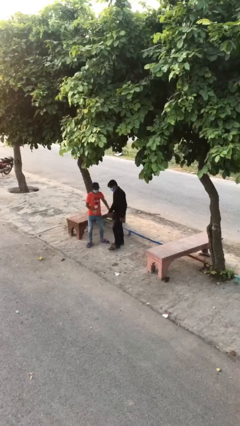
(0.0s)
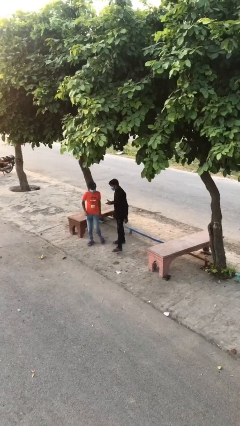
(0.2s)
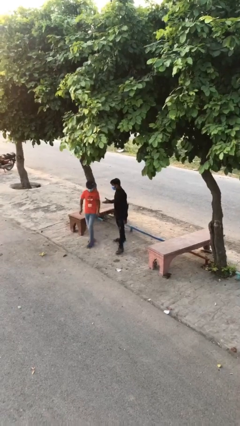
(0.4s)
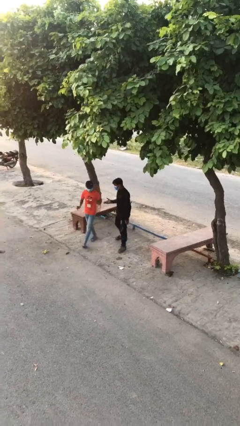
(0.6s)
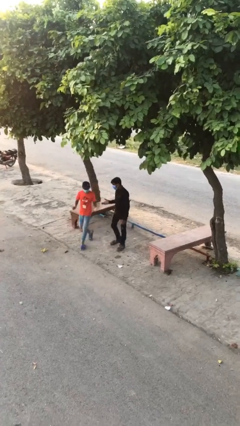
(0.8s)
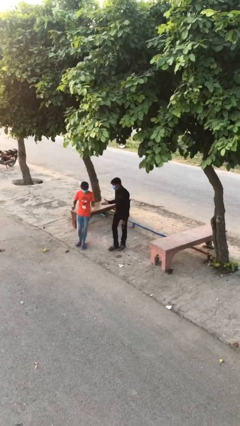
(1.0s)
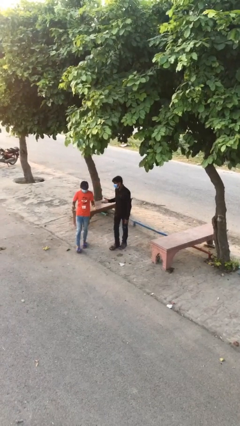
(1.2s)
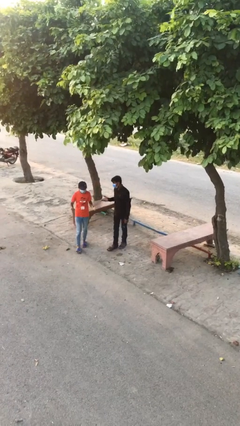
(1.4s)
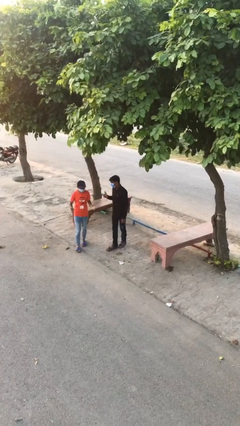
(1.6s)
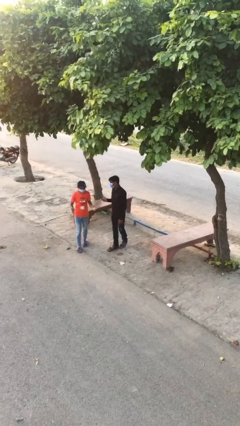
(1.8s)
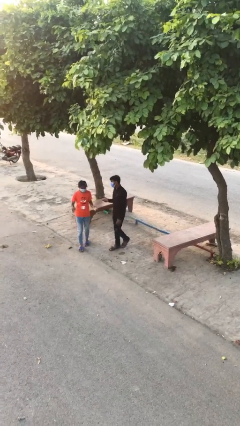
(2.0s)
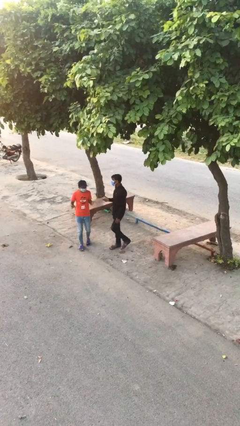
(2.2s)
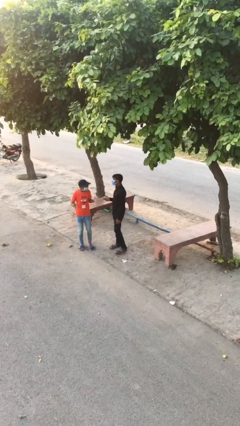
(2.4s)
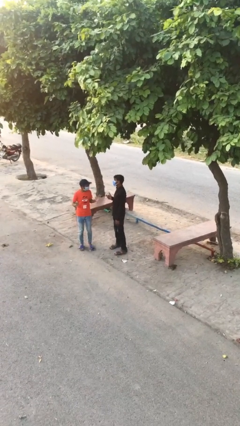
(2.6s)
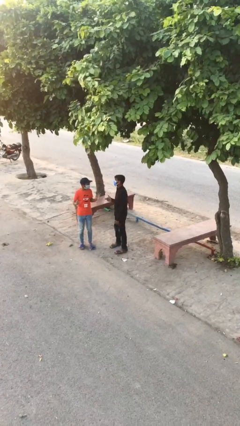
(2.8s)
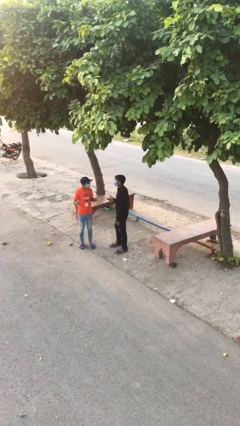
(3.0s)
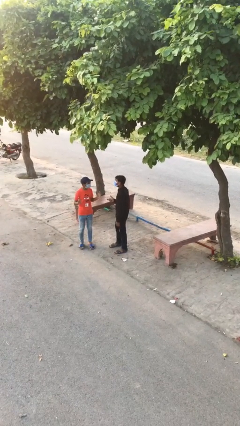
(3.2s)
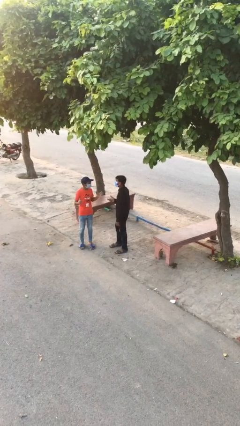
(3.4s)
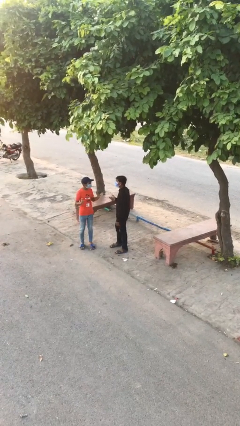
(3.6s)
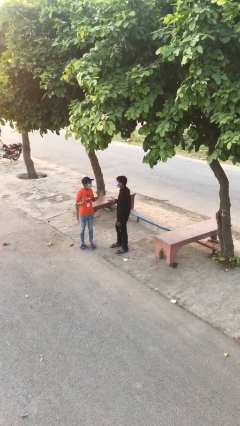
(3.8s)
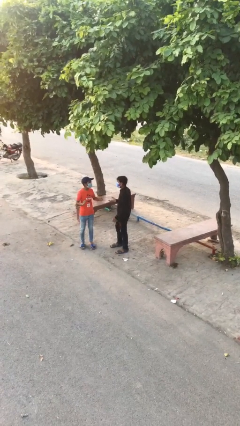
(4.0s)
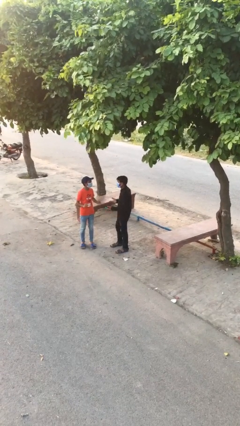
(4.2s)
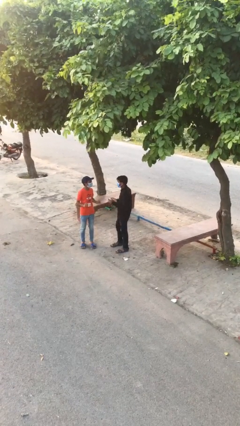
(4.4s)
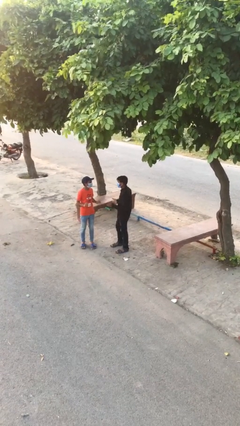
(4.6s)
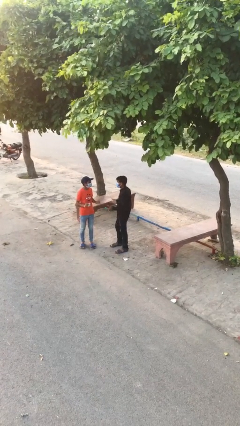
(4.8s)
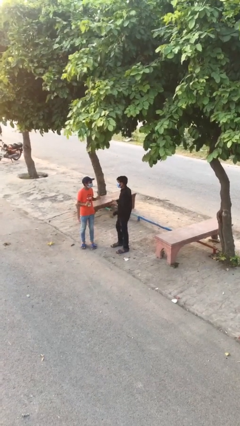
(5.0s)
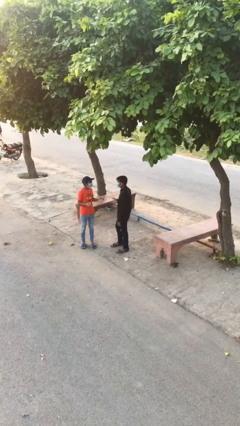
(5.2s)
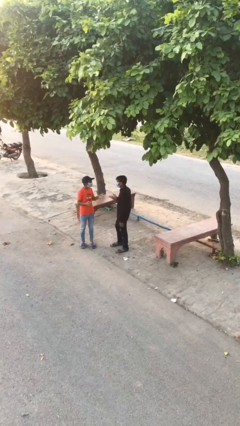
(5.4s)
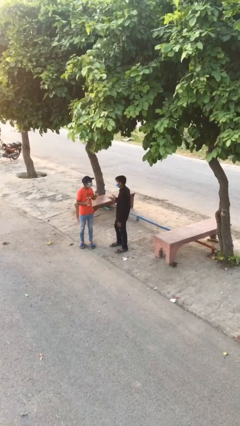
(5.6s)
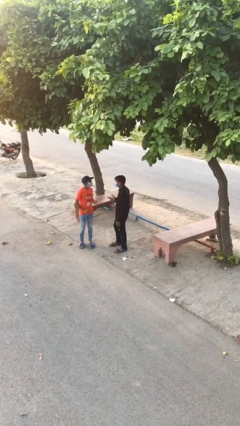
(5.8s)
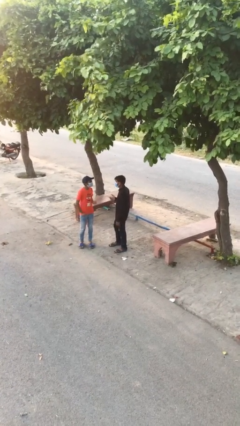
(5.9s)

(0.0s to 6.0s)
person talks to person

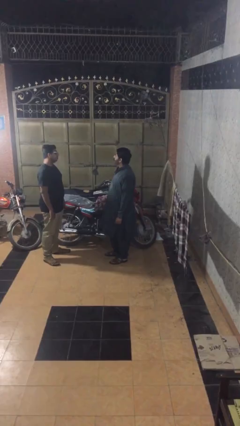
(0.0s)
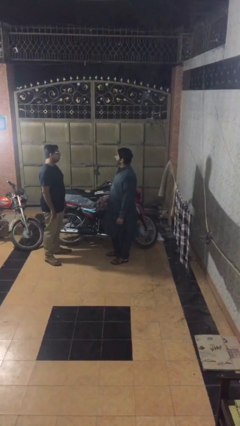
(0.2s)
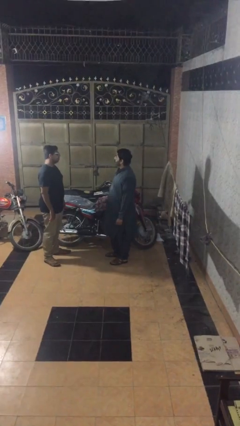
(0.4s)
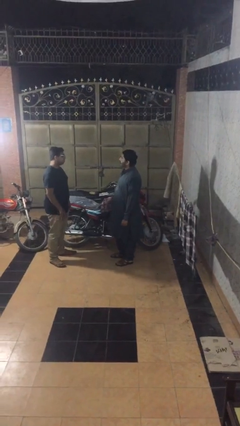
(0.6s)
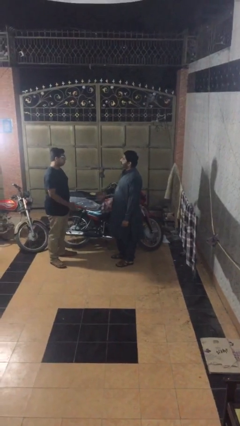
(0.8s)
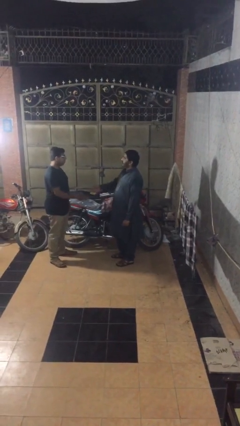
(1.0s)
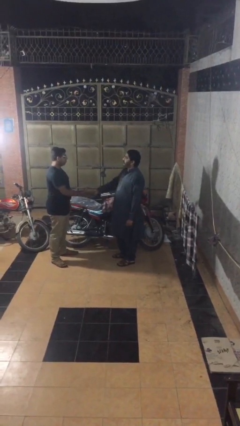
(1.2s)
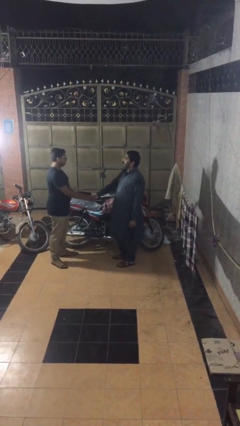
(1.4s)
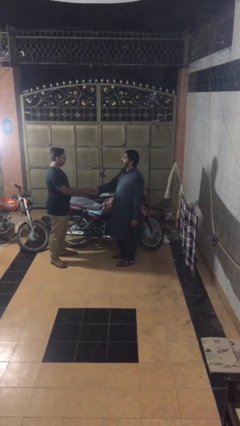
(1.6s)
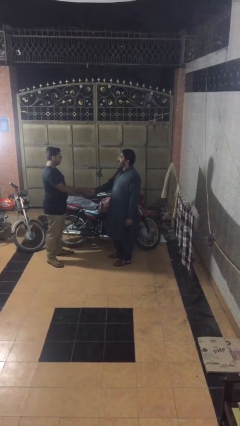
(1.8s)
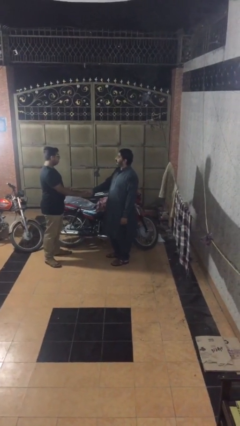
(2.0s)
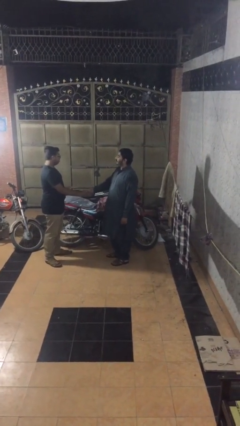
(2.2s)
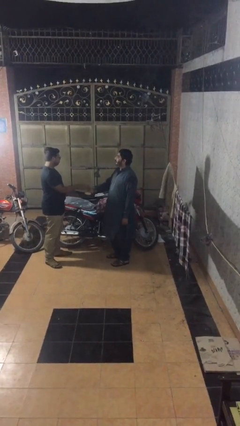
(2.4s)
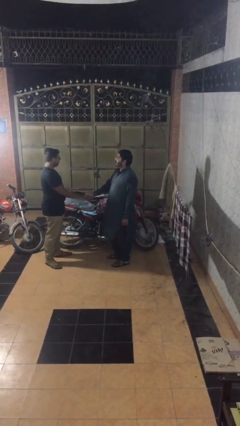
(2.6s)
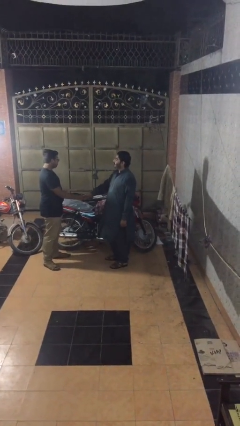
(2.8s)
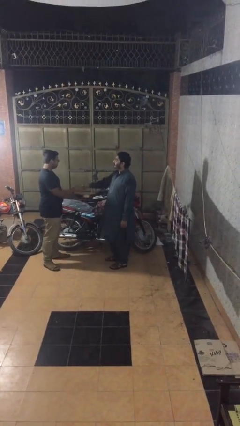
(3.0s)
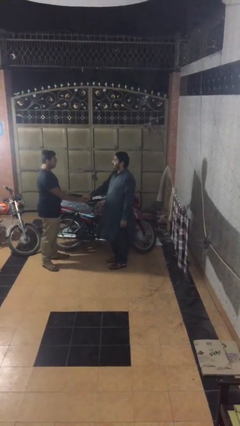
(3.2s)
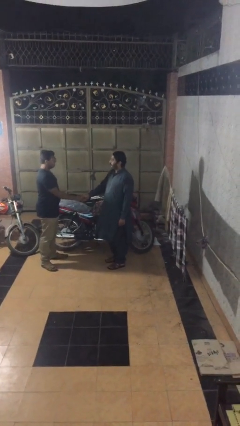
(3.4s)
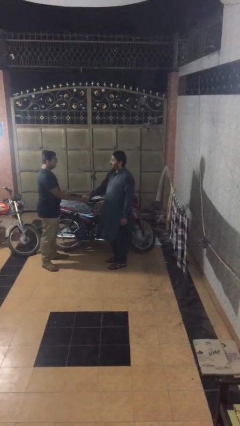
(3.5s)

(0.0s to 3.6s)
person shakes hand

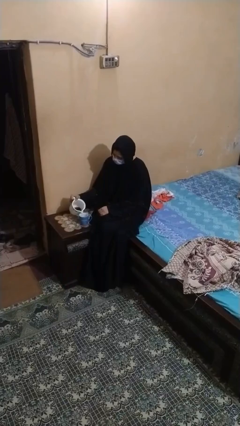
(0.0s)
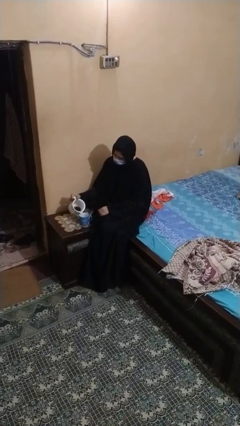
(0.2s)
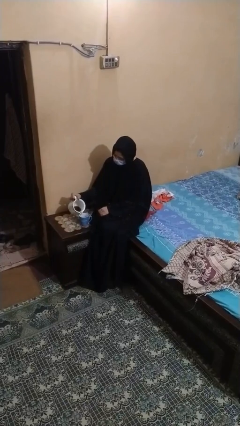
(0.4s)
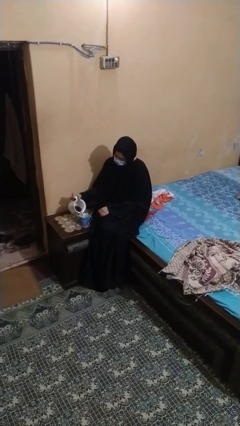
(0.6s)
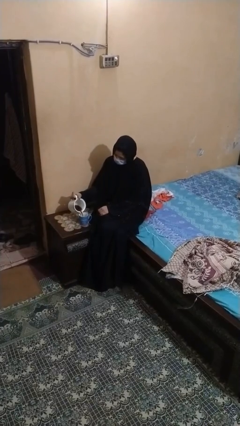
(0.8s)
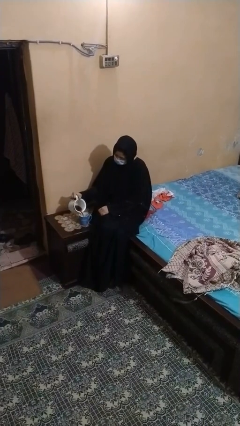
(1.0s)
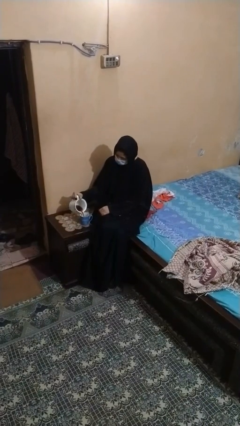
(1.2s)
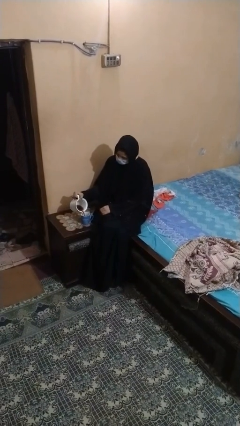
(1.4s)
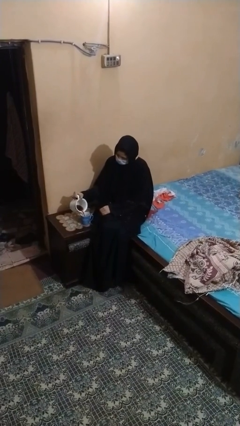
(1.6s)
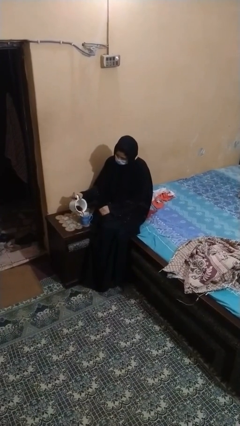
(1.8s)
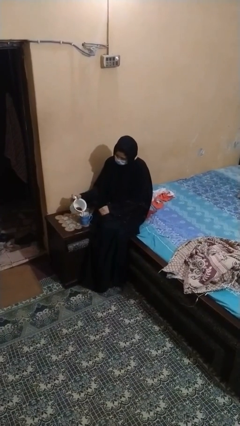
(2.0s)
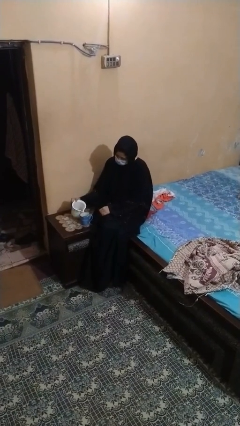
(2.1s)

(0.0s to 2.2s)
person pours coffee into mug

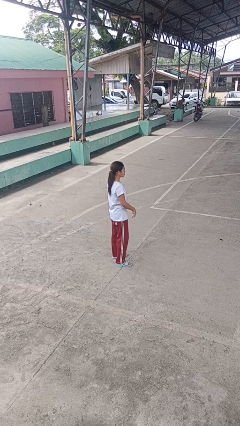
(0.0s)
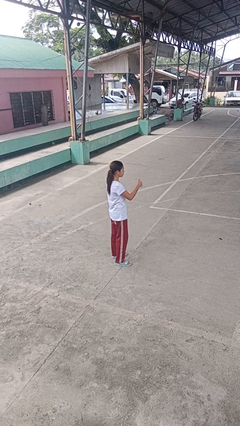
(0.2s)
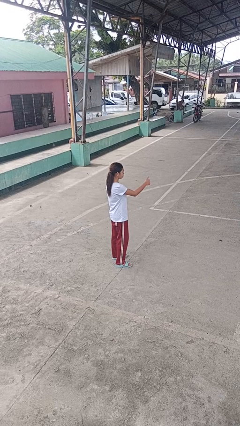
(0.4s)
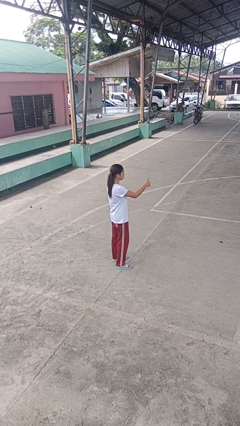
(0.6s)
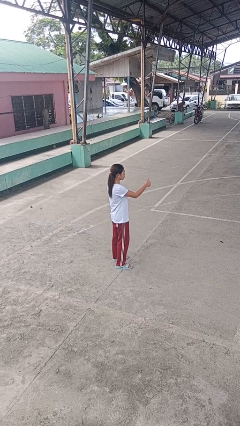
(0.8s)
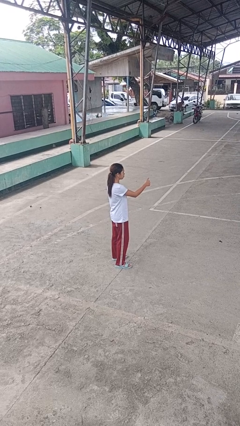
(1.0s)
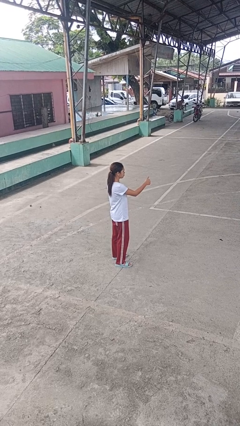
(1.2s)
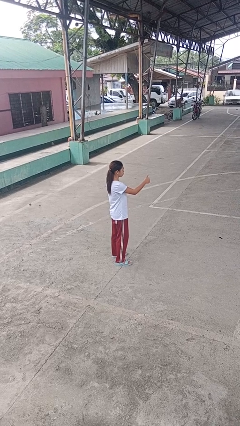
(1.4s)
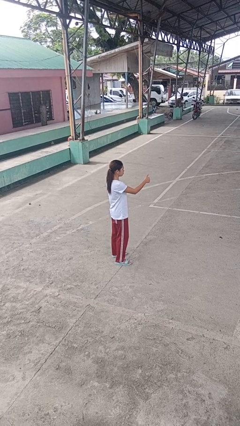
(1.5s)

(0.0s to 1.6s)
person gestures thumbs up

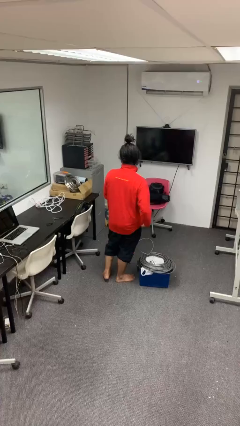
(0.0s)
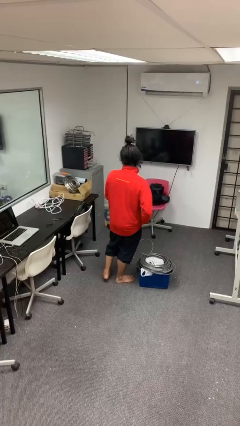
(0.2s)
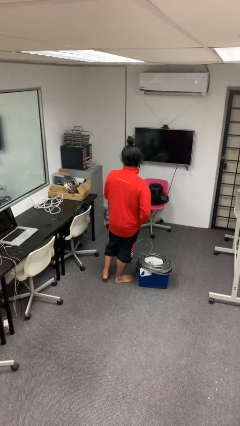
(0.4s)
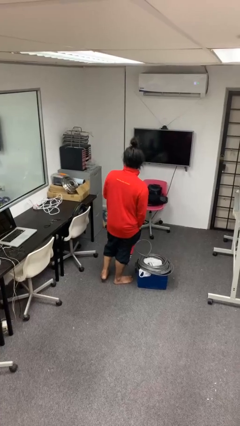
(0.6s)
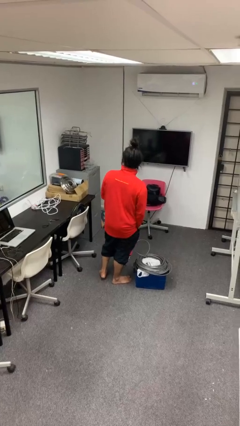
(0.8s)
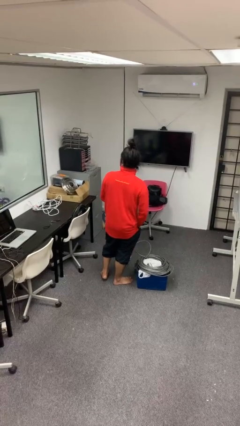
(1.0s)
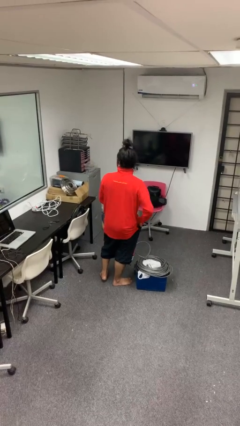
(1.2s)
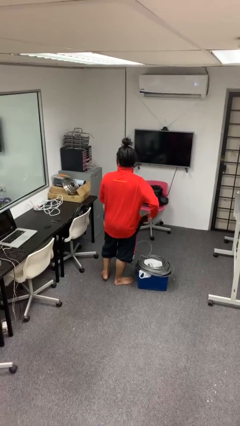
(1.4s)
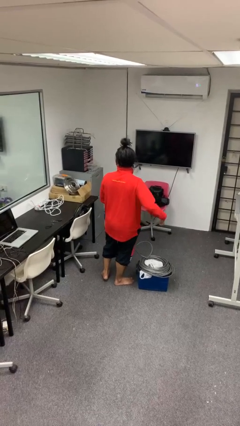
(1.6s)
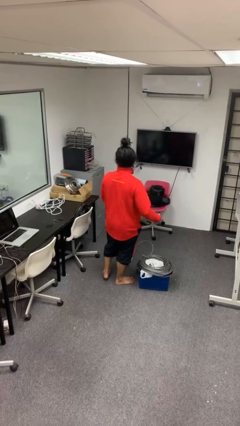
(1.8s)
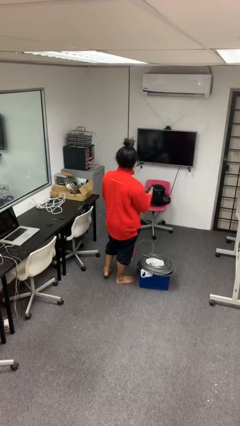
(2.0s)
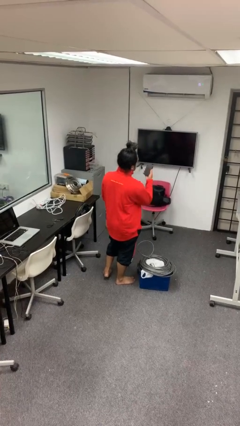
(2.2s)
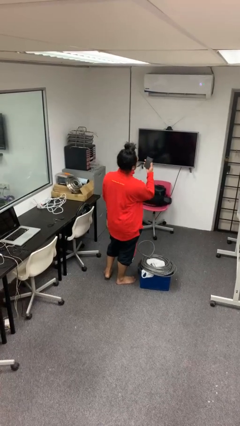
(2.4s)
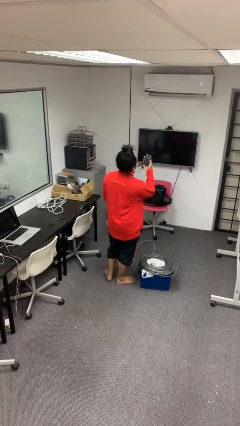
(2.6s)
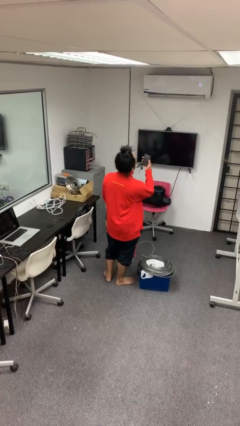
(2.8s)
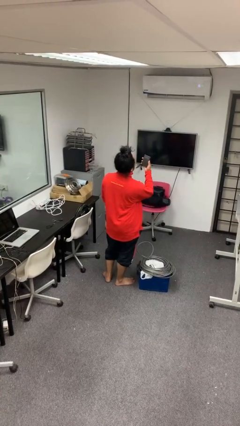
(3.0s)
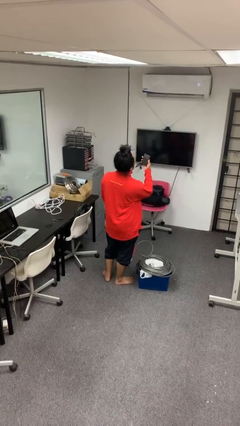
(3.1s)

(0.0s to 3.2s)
person takes phone from pocket

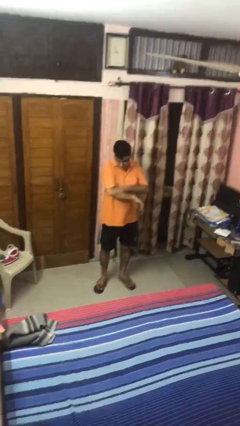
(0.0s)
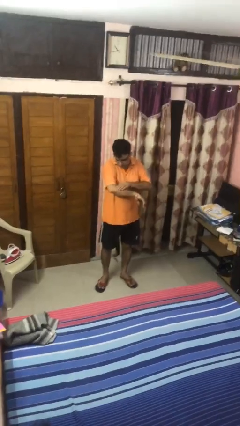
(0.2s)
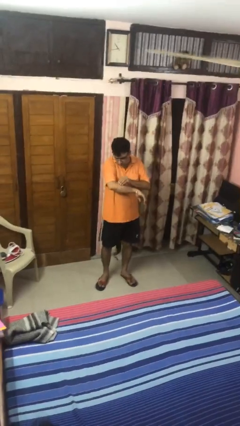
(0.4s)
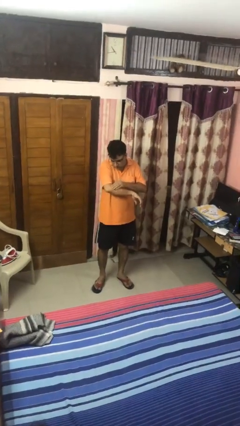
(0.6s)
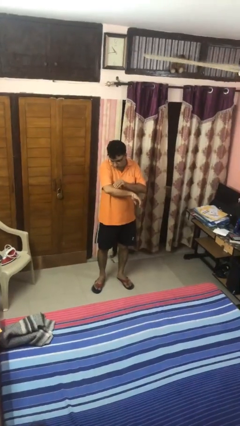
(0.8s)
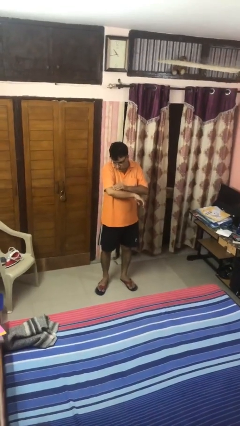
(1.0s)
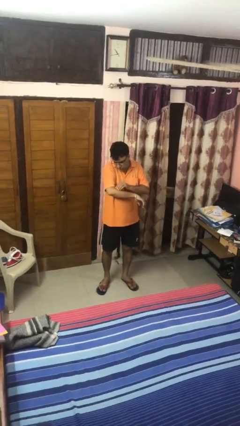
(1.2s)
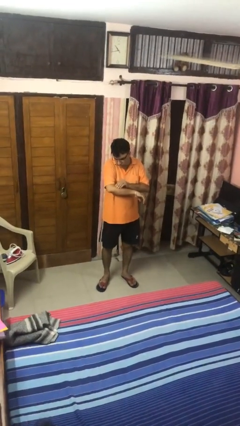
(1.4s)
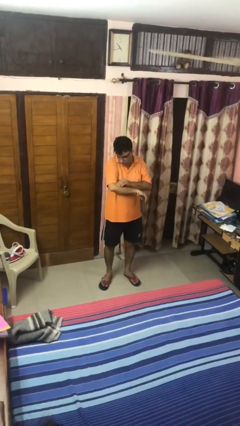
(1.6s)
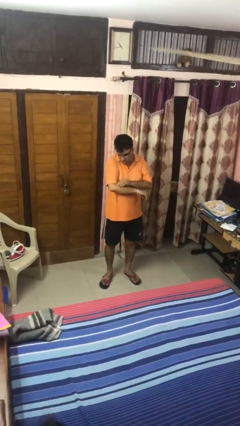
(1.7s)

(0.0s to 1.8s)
person swats bug
